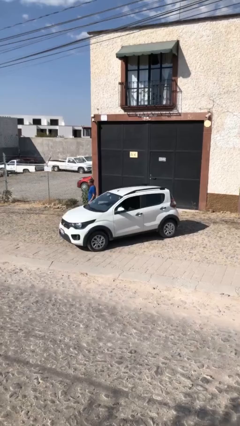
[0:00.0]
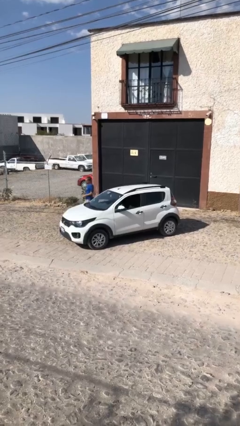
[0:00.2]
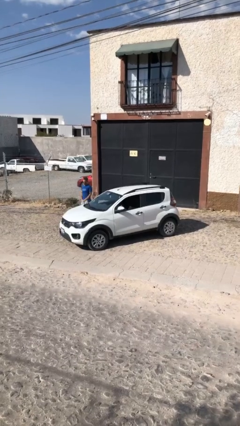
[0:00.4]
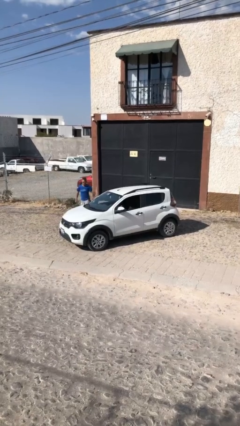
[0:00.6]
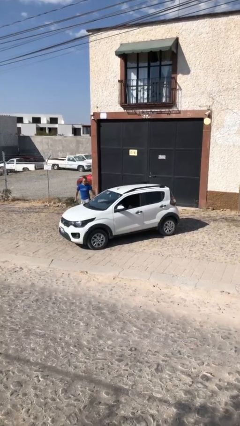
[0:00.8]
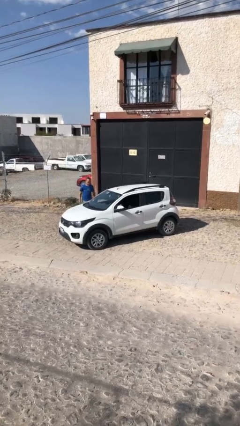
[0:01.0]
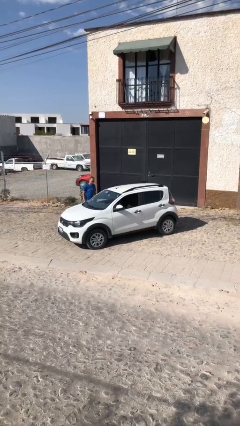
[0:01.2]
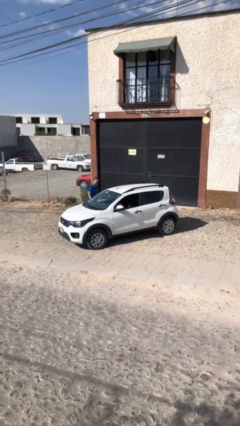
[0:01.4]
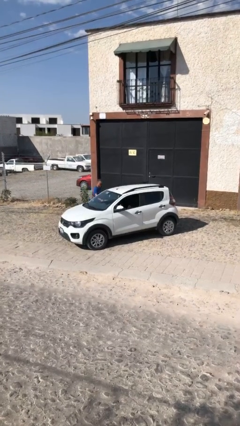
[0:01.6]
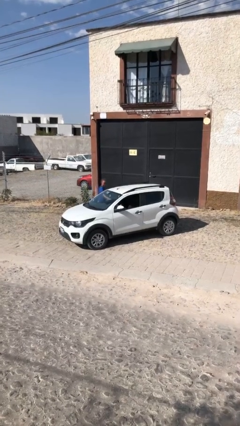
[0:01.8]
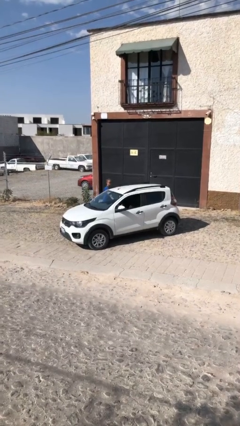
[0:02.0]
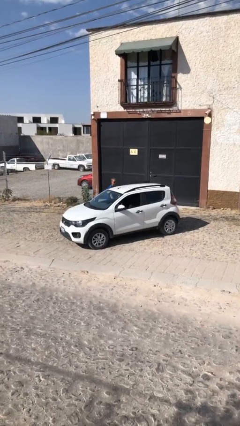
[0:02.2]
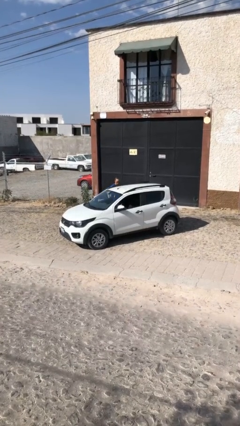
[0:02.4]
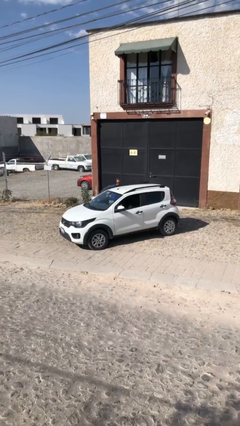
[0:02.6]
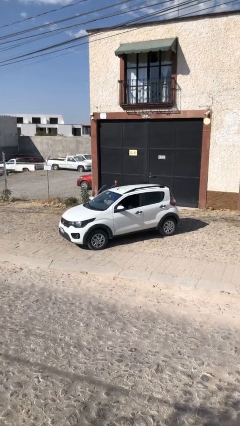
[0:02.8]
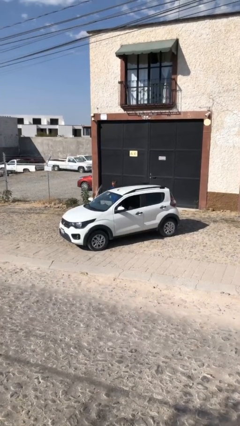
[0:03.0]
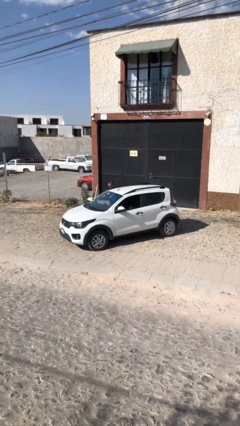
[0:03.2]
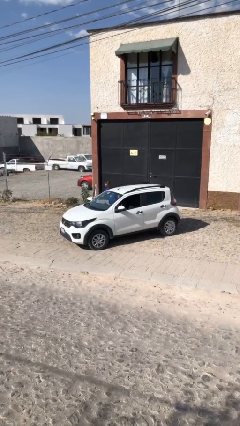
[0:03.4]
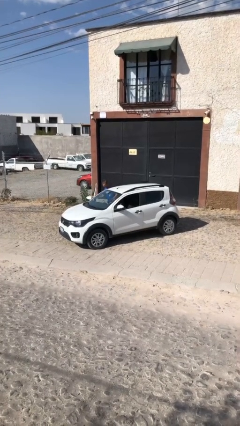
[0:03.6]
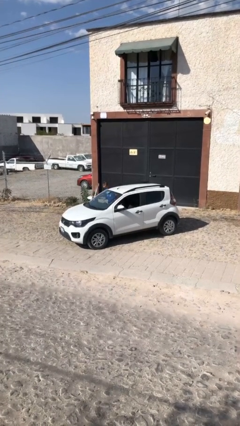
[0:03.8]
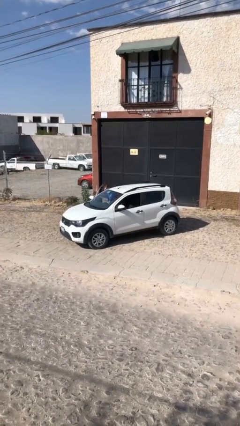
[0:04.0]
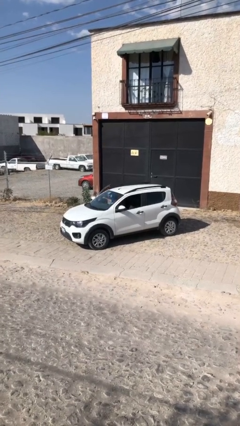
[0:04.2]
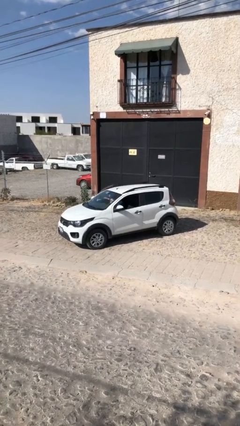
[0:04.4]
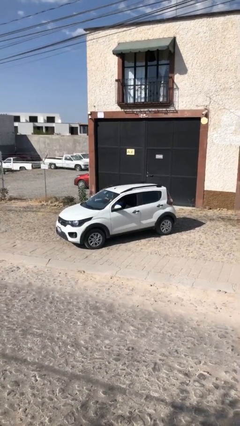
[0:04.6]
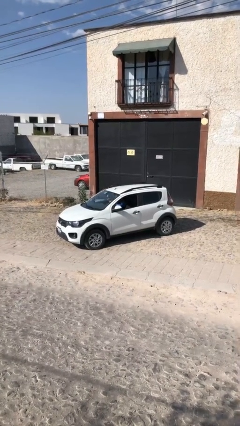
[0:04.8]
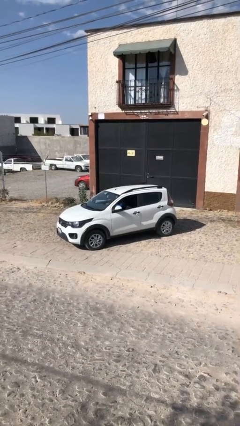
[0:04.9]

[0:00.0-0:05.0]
car picks up person

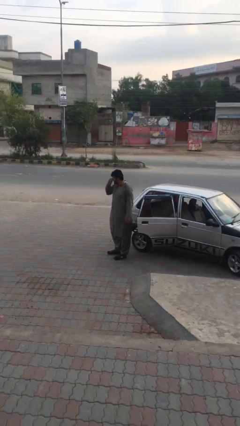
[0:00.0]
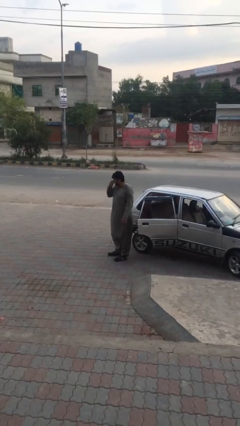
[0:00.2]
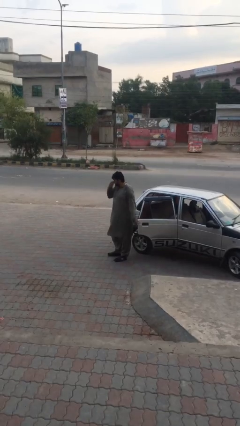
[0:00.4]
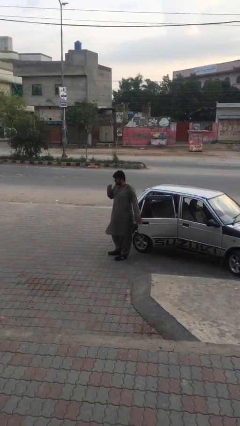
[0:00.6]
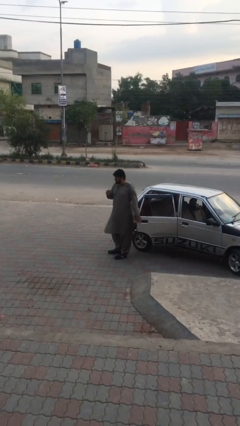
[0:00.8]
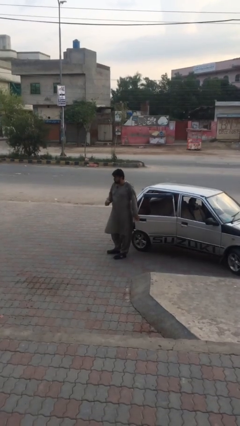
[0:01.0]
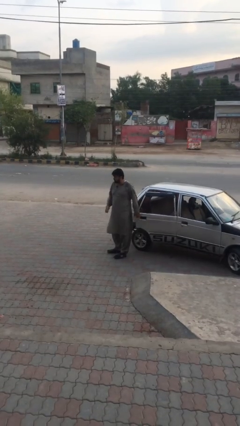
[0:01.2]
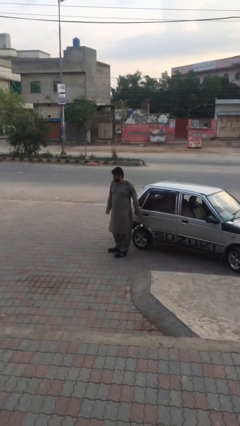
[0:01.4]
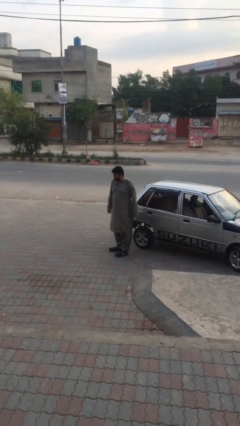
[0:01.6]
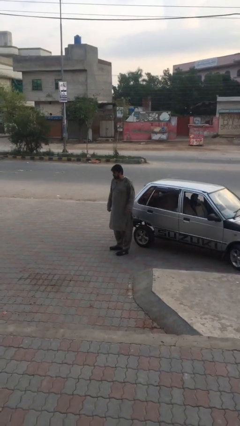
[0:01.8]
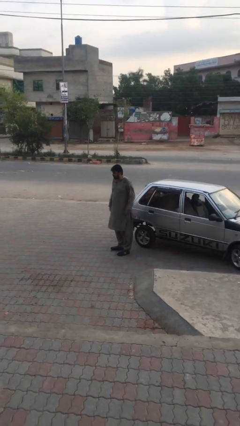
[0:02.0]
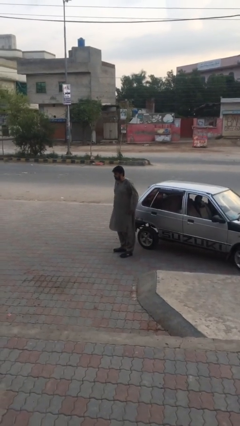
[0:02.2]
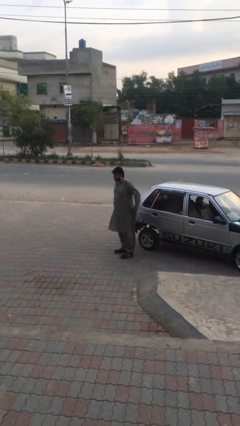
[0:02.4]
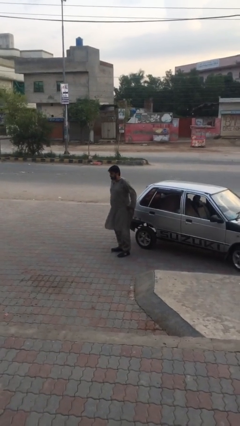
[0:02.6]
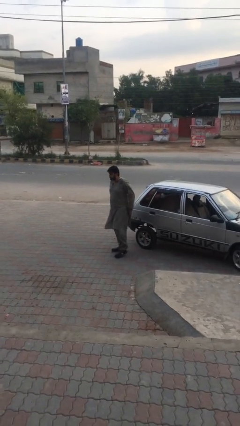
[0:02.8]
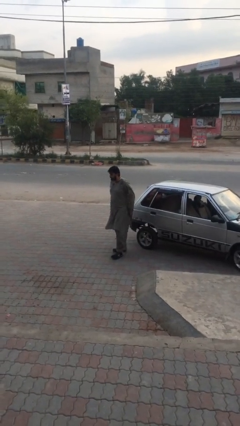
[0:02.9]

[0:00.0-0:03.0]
person closes car door

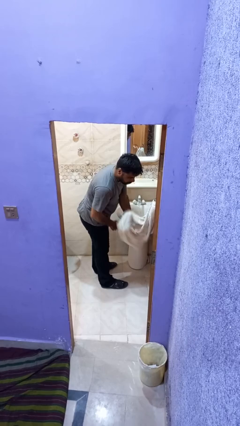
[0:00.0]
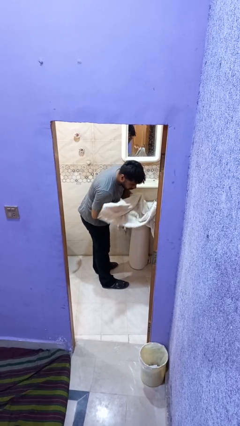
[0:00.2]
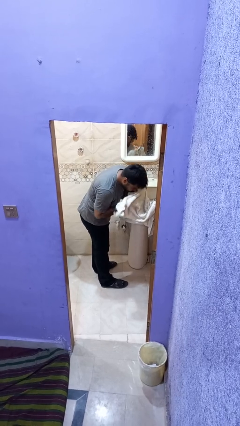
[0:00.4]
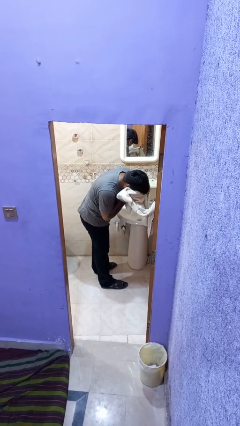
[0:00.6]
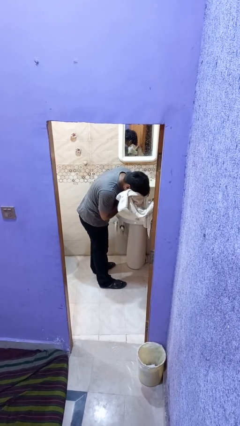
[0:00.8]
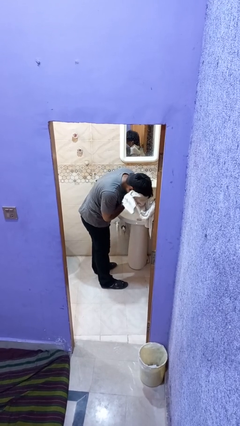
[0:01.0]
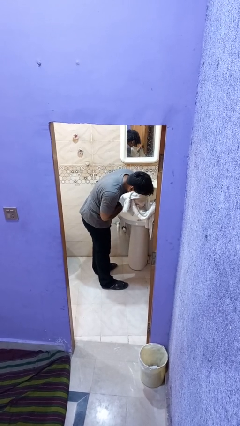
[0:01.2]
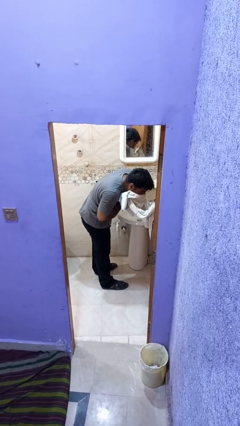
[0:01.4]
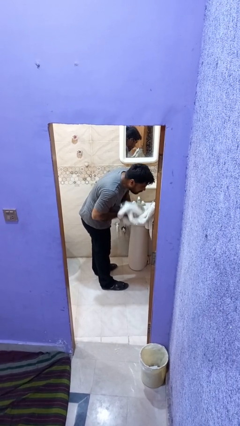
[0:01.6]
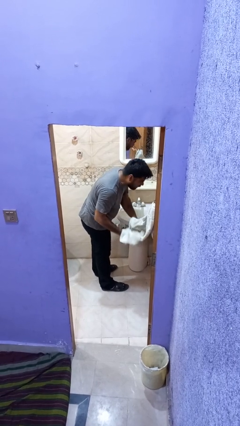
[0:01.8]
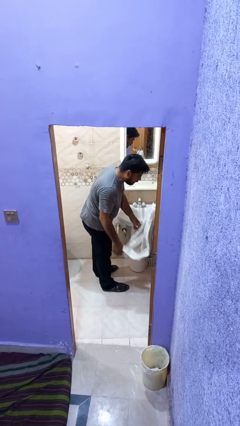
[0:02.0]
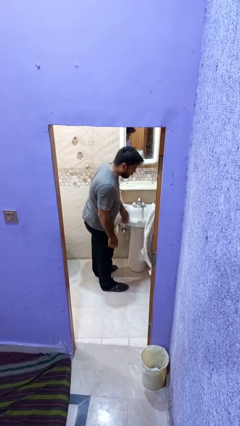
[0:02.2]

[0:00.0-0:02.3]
person dries face with towel

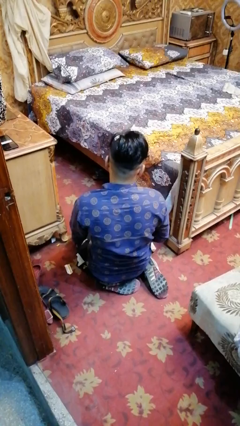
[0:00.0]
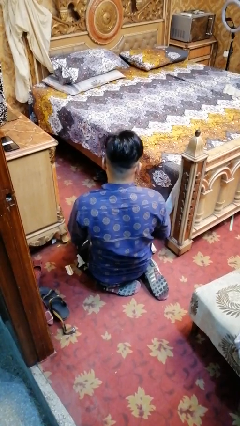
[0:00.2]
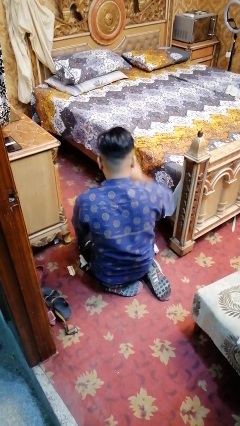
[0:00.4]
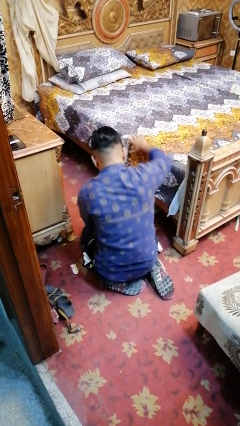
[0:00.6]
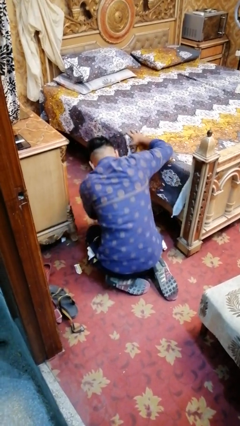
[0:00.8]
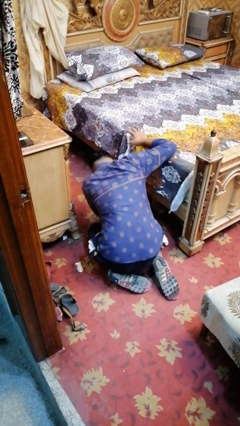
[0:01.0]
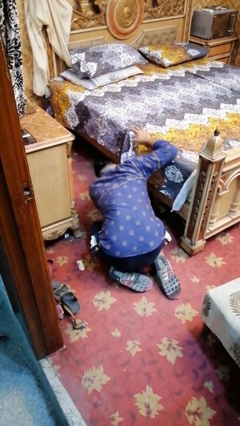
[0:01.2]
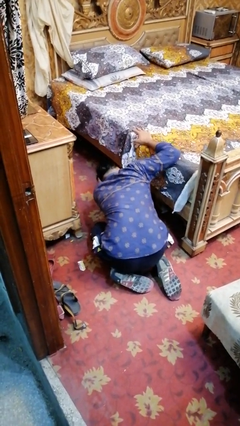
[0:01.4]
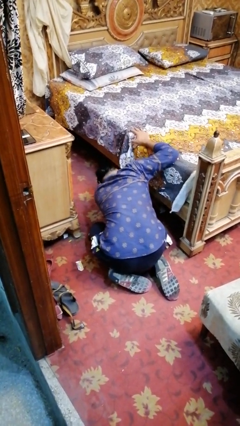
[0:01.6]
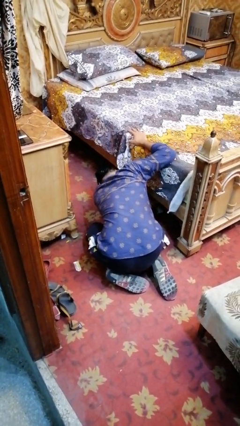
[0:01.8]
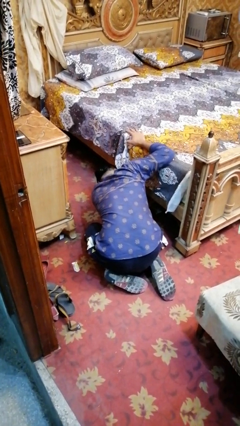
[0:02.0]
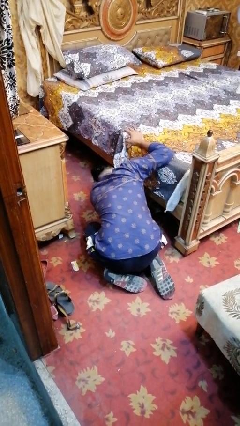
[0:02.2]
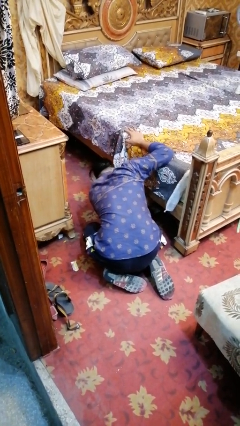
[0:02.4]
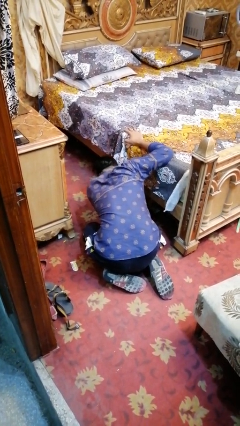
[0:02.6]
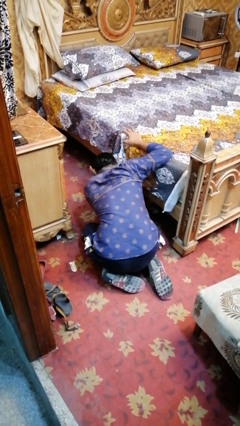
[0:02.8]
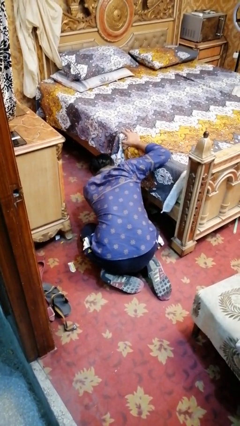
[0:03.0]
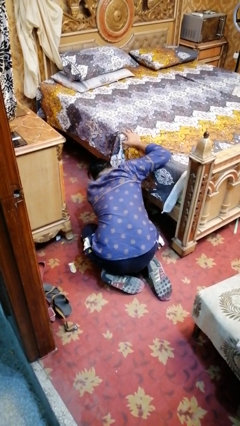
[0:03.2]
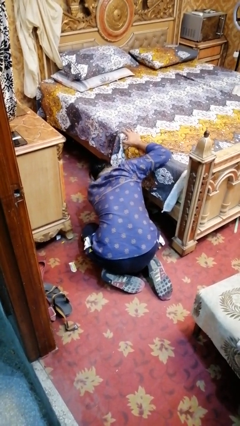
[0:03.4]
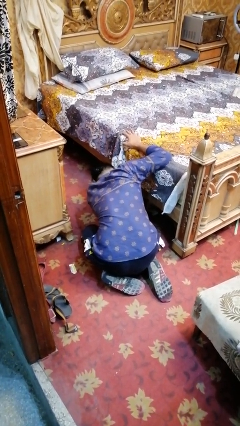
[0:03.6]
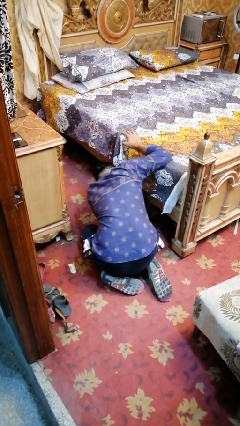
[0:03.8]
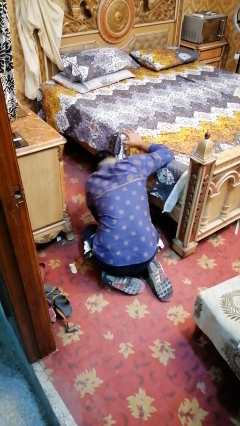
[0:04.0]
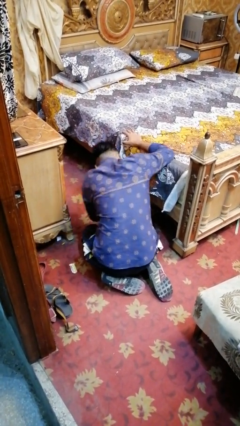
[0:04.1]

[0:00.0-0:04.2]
person searches under bed

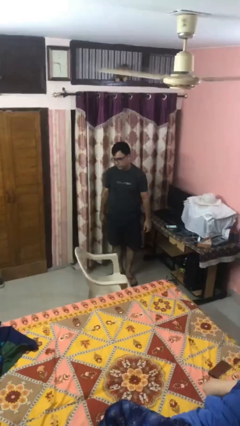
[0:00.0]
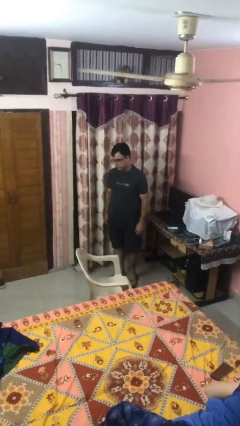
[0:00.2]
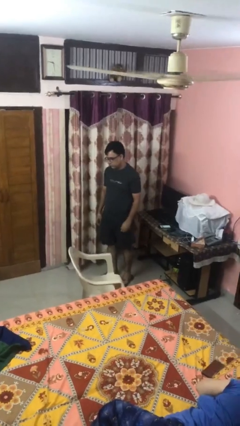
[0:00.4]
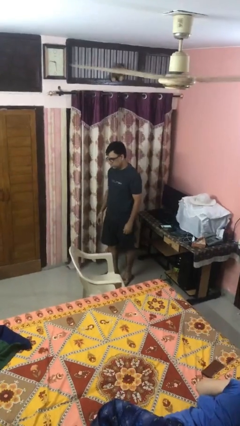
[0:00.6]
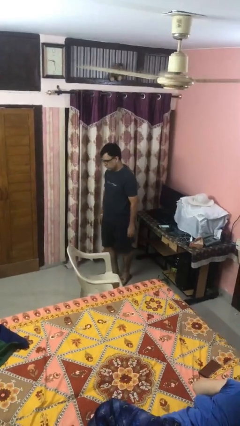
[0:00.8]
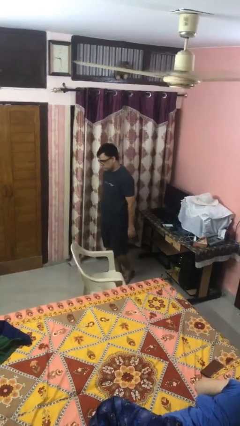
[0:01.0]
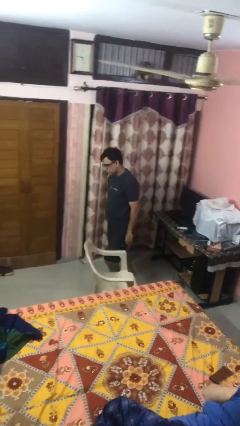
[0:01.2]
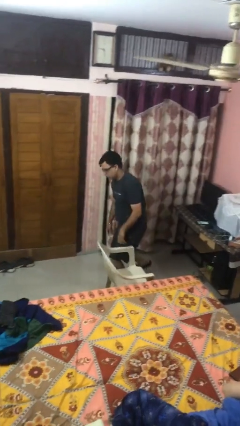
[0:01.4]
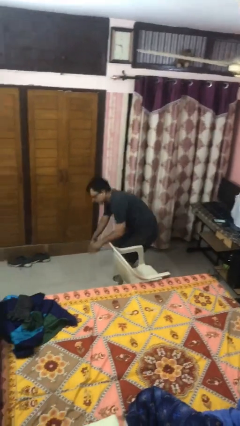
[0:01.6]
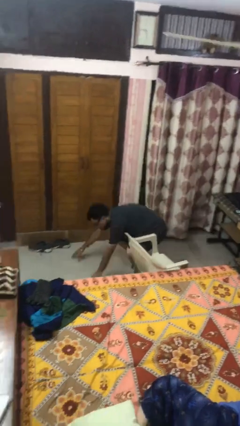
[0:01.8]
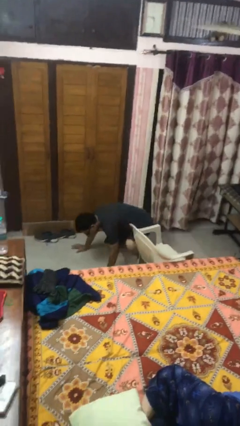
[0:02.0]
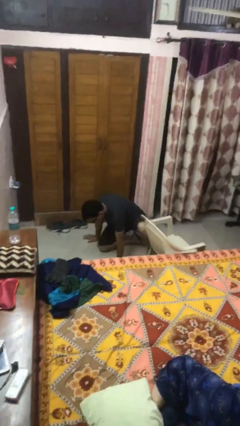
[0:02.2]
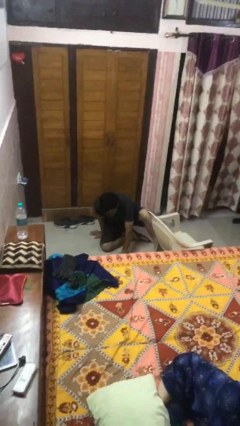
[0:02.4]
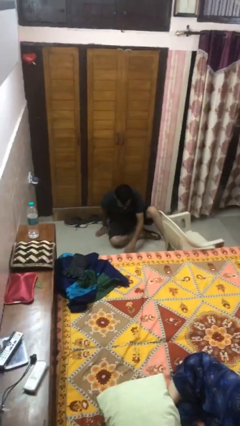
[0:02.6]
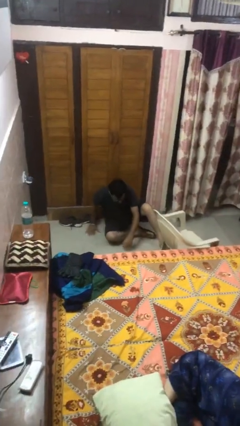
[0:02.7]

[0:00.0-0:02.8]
person trips on object on floor

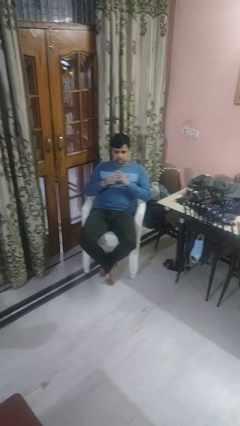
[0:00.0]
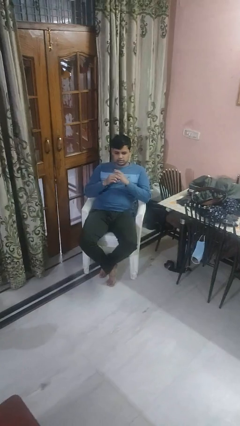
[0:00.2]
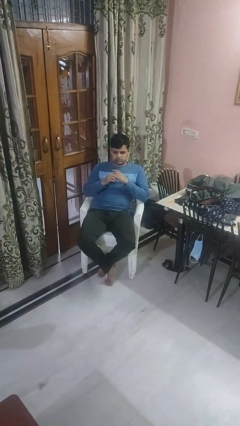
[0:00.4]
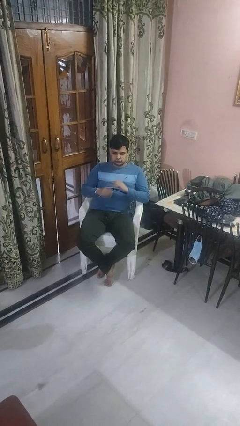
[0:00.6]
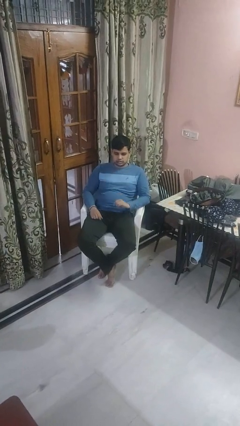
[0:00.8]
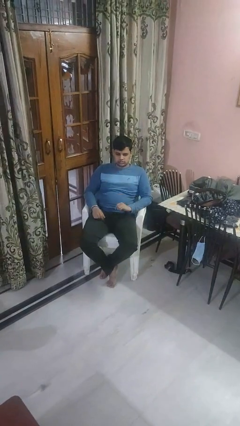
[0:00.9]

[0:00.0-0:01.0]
person puts on ring
